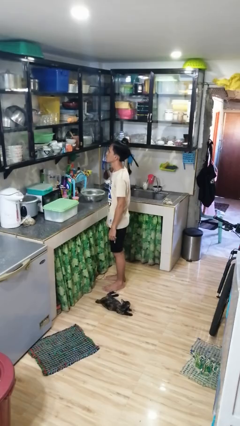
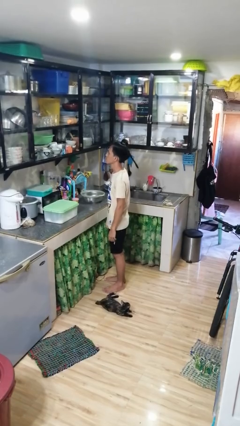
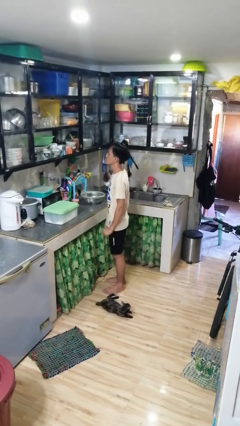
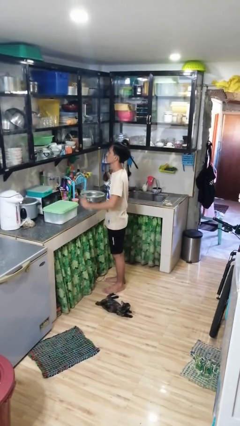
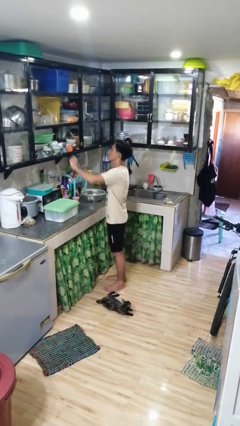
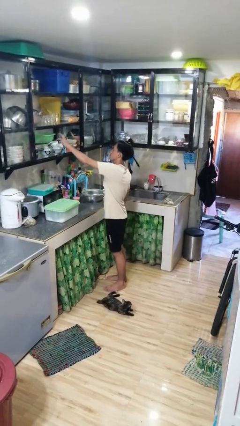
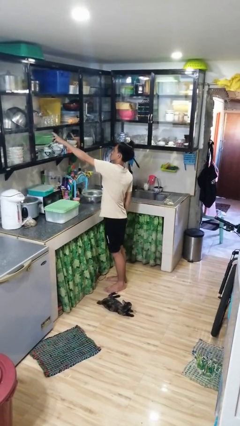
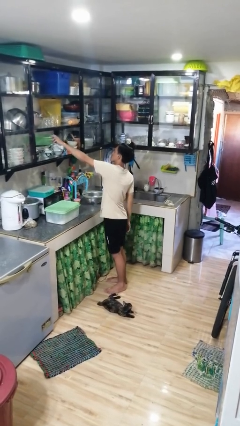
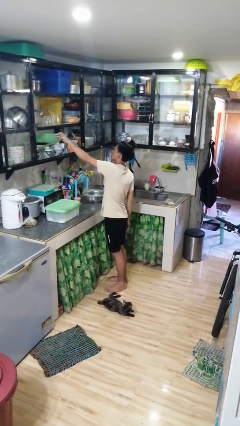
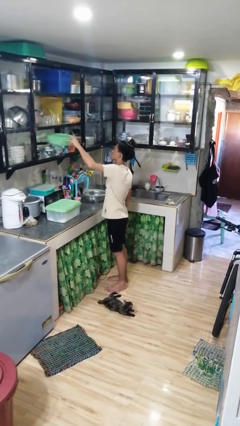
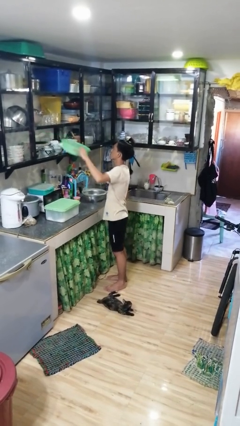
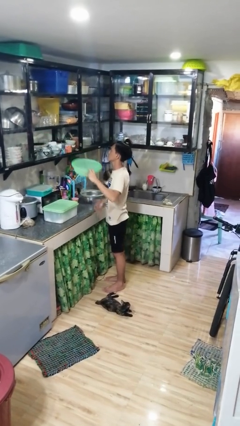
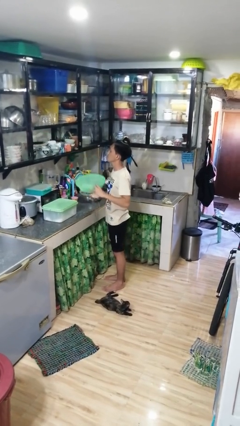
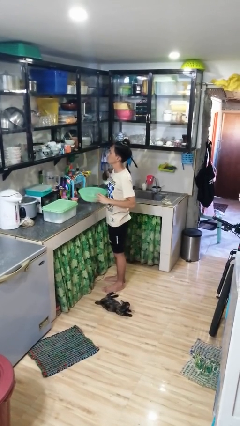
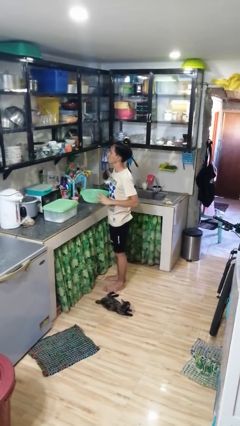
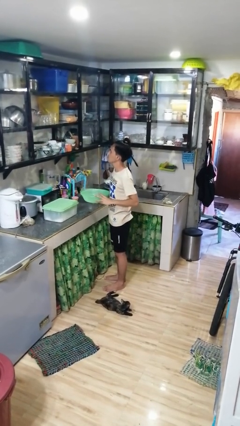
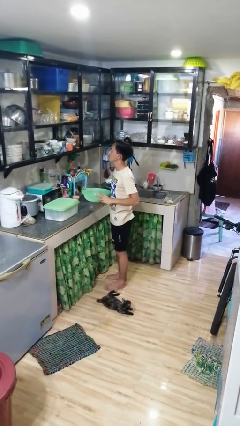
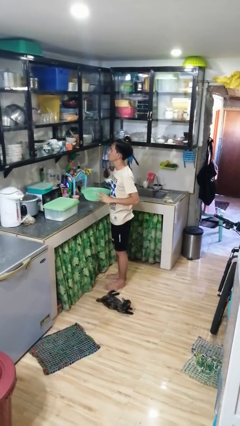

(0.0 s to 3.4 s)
person picks up object from cabinet

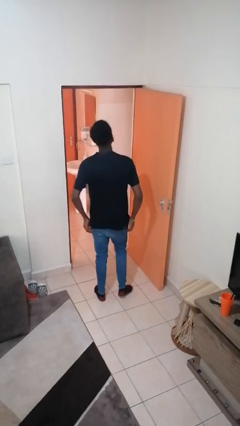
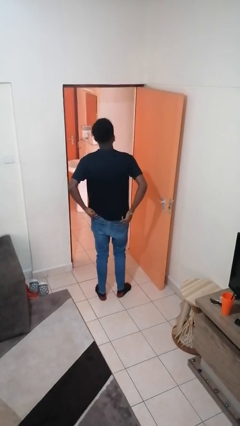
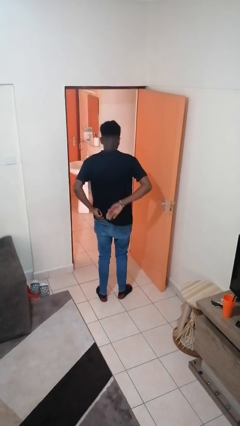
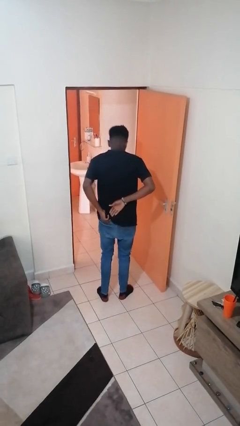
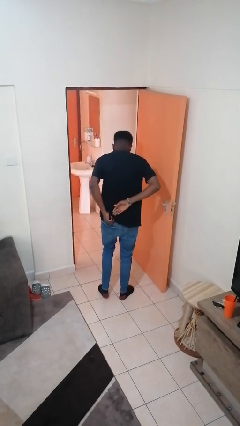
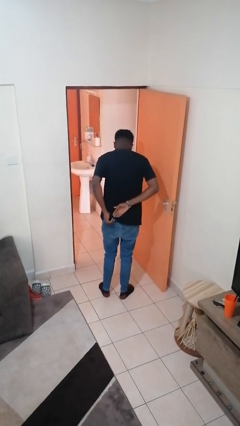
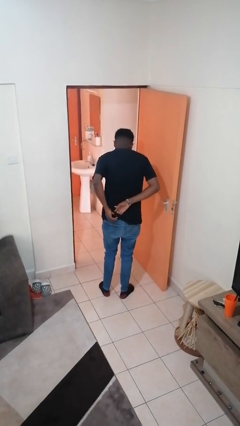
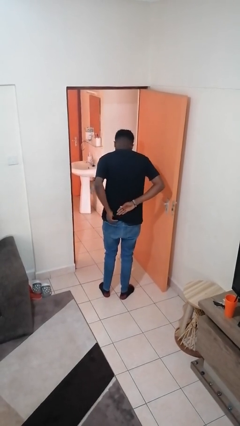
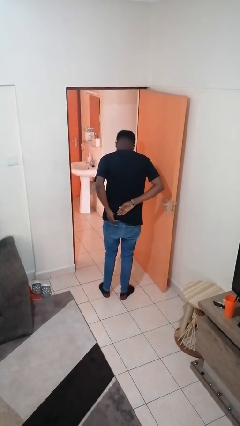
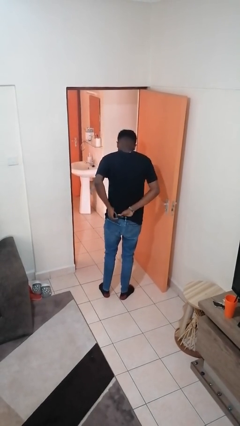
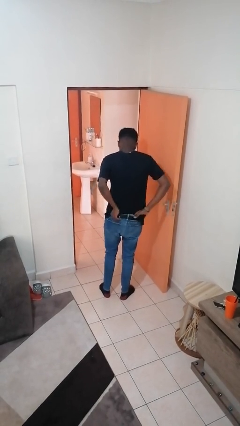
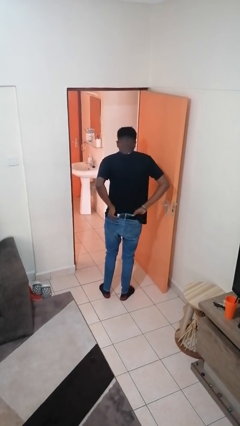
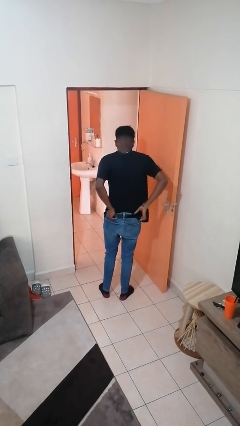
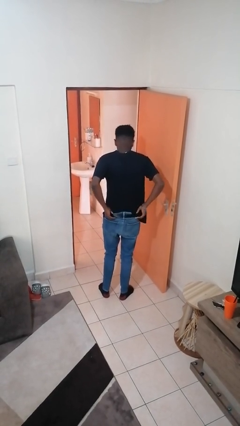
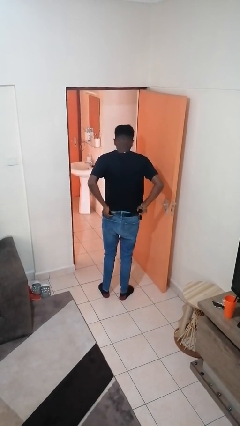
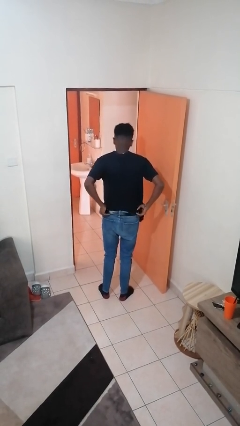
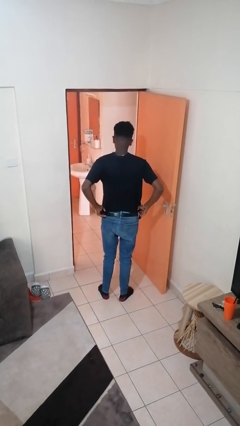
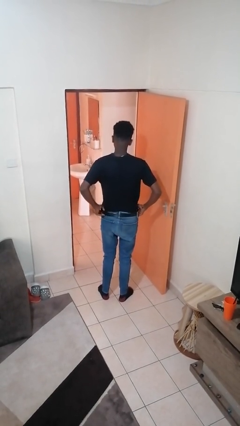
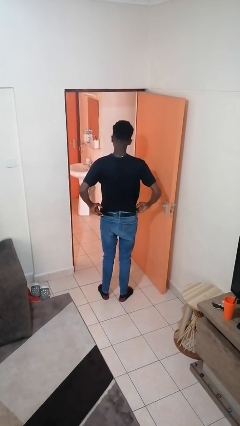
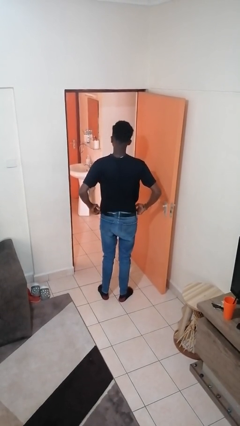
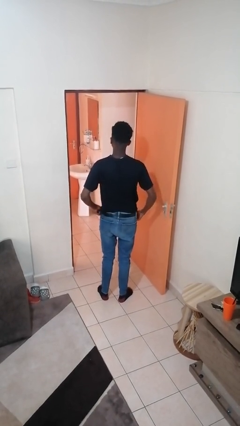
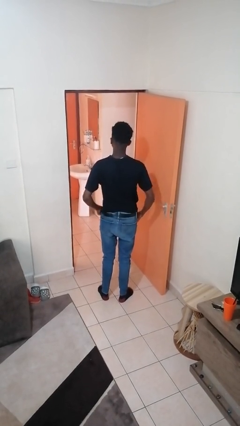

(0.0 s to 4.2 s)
person tucks in shirt

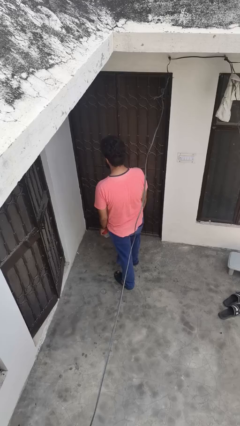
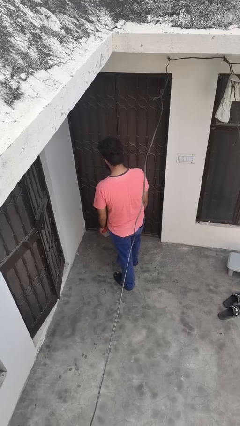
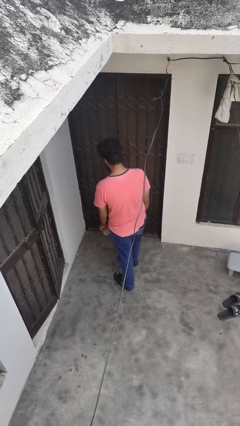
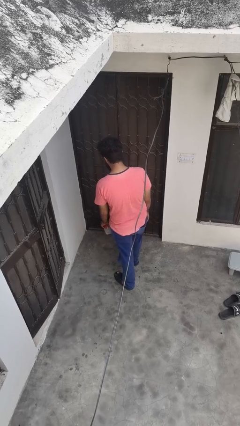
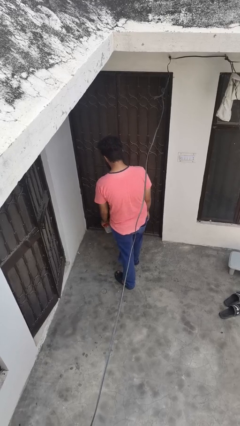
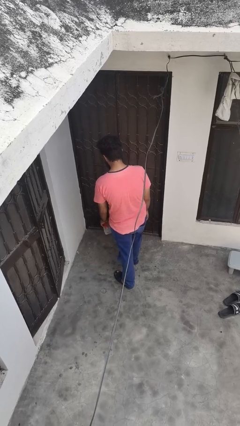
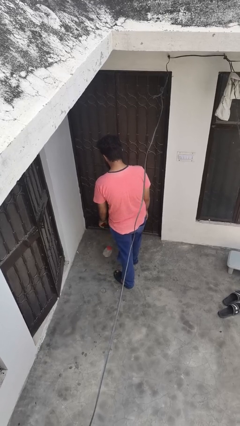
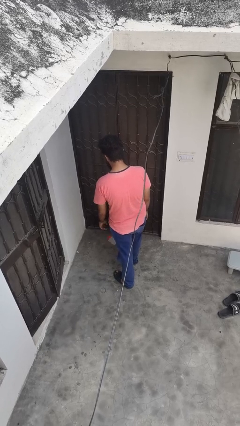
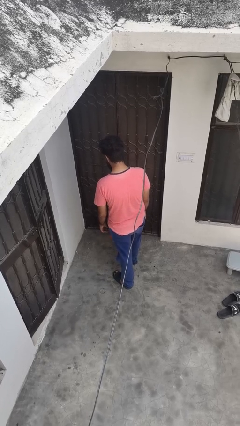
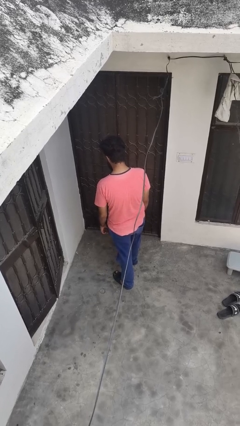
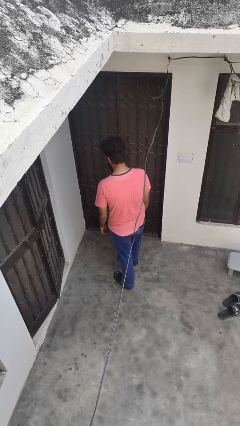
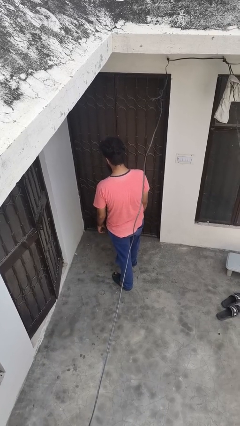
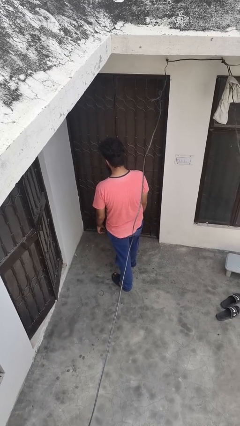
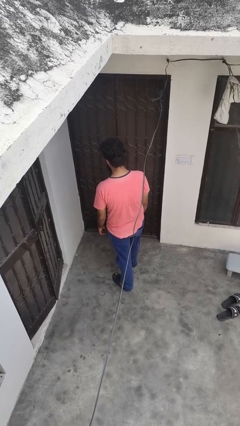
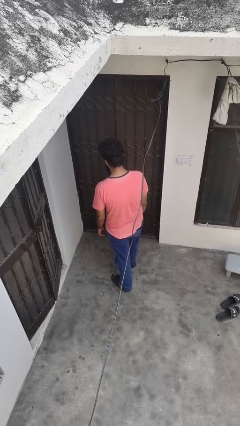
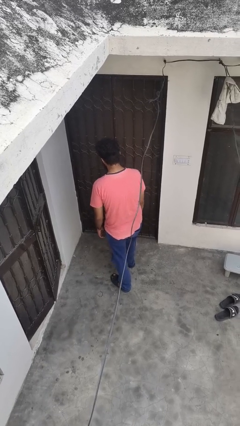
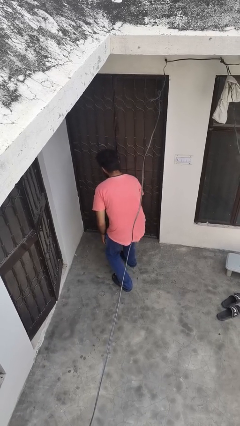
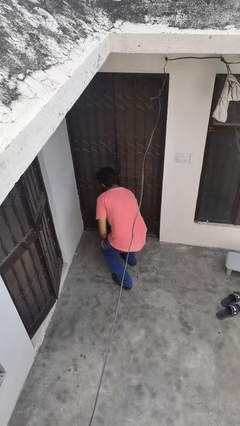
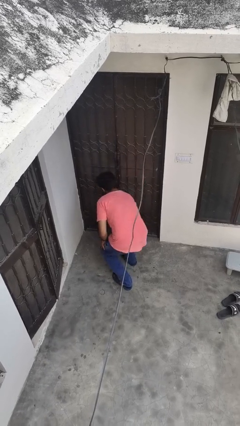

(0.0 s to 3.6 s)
person drops object

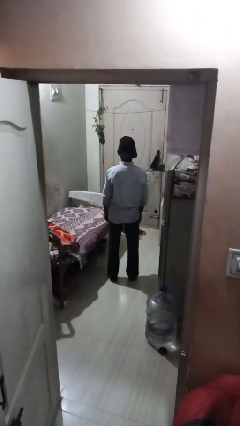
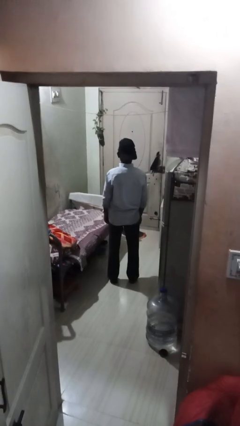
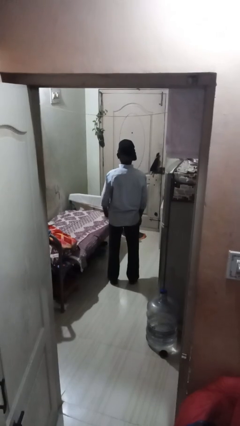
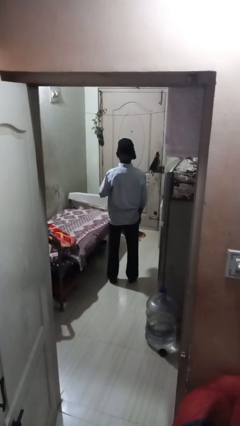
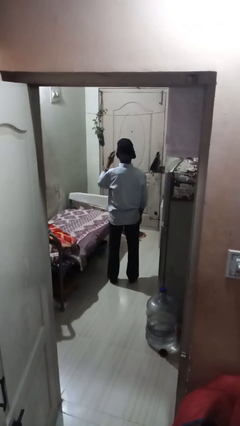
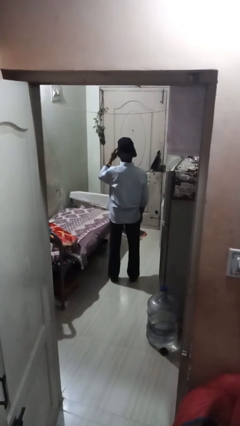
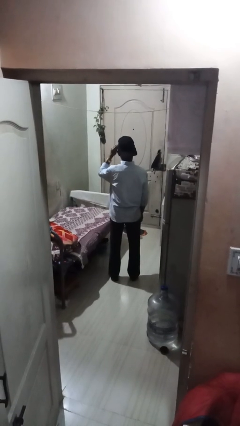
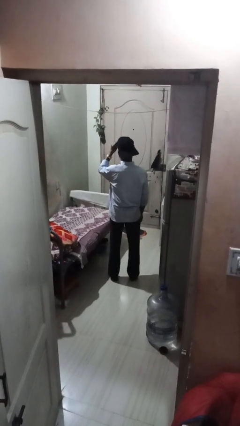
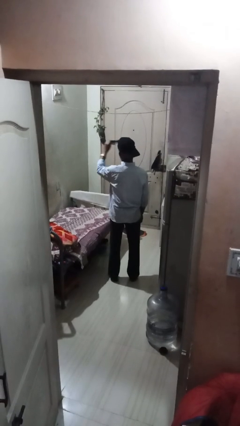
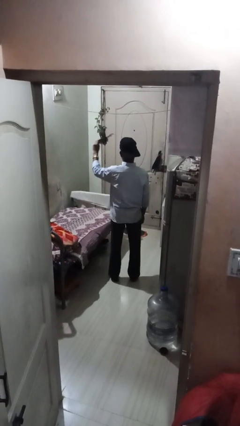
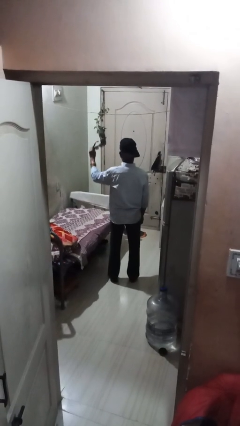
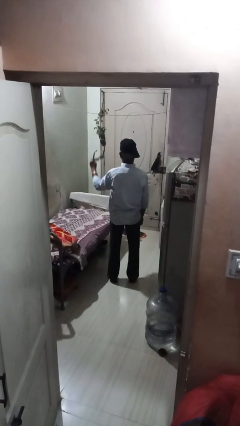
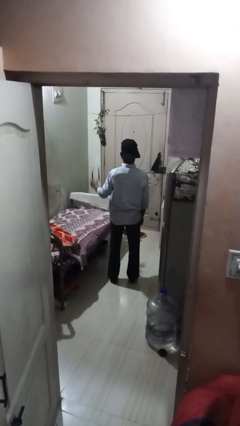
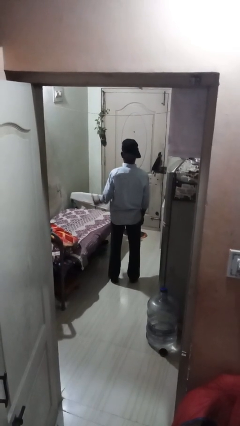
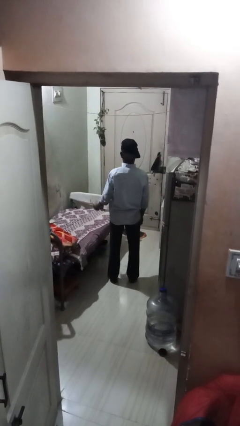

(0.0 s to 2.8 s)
person takes off sunglasses

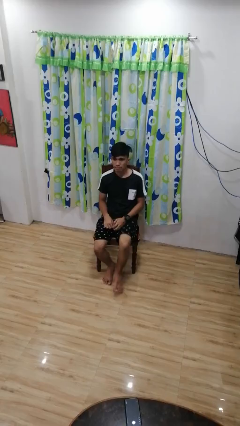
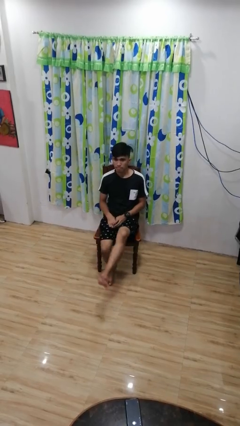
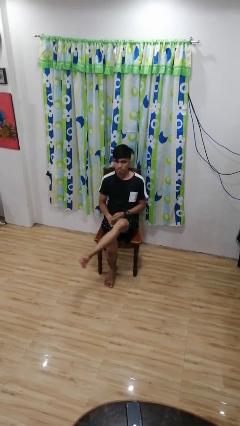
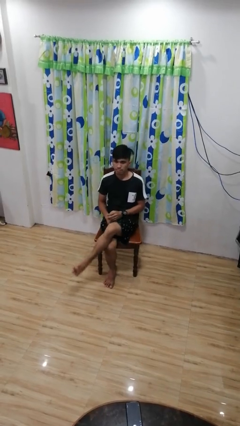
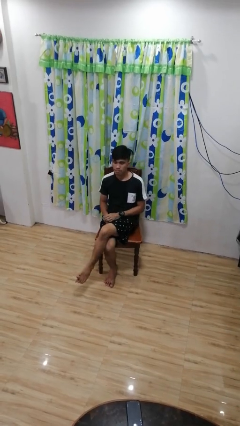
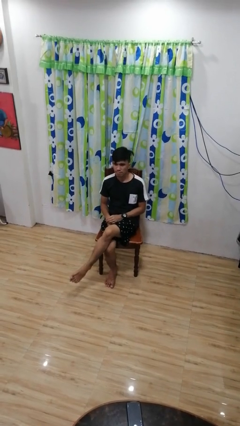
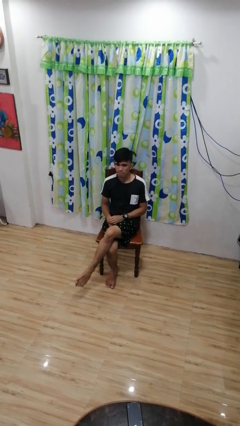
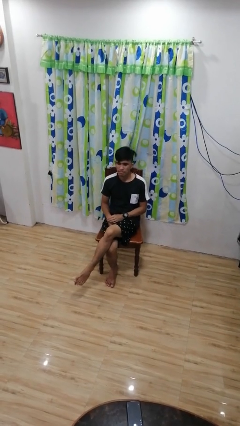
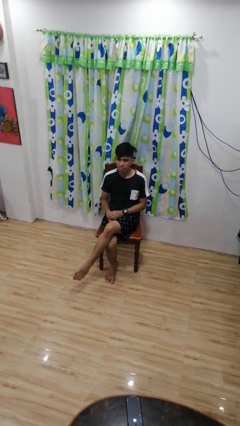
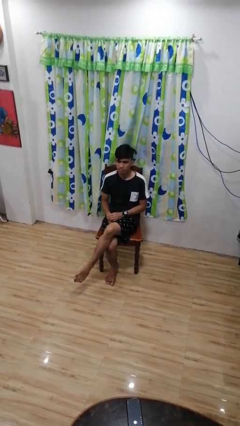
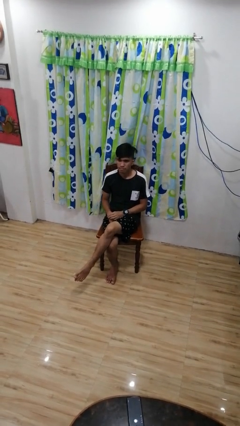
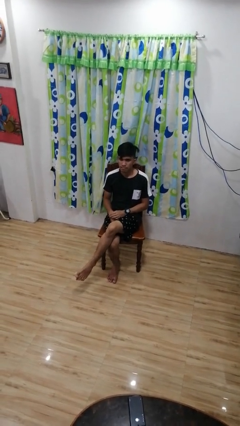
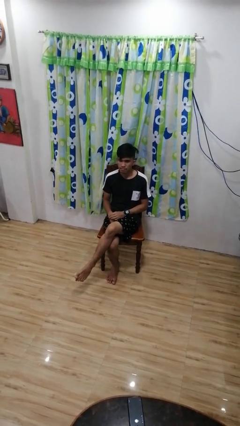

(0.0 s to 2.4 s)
person crosses legs

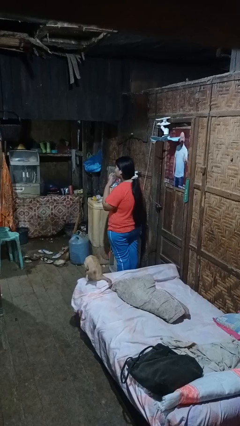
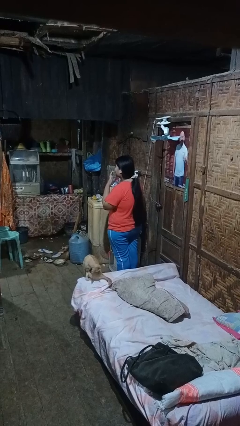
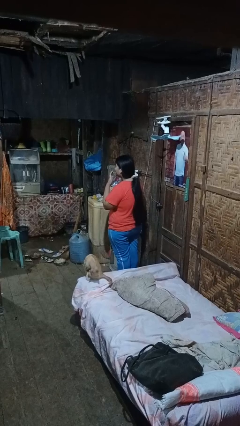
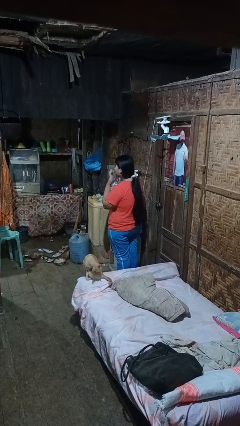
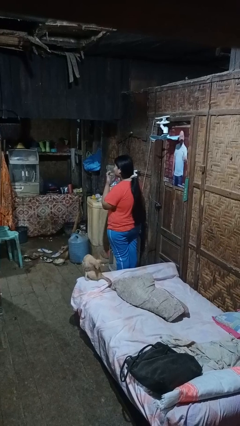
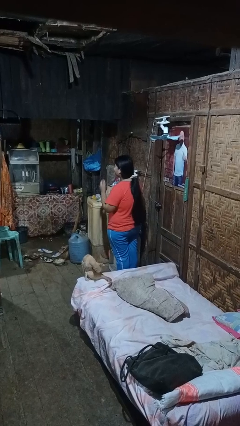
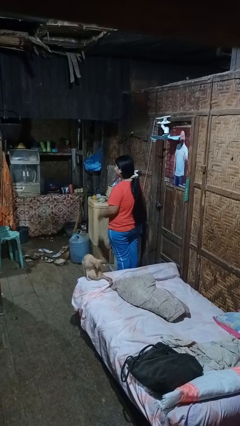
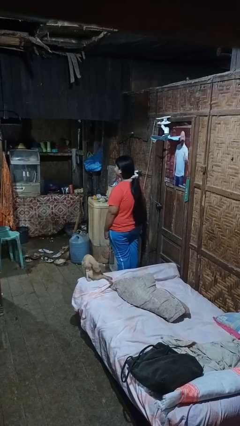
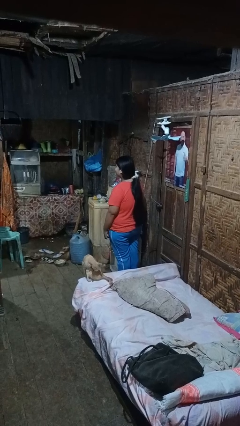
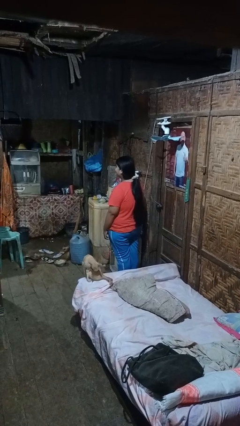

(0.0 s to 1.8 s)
person licks fingers
